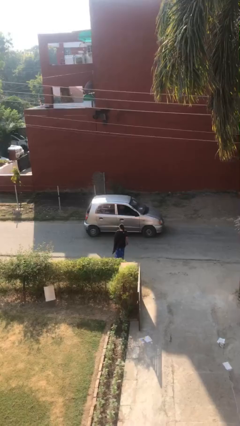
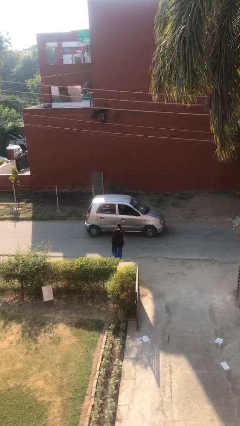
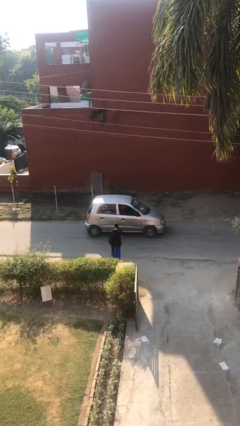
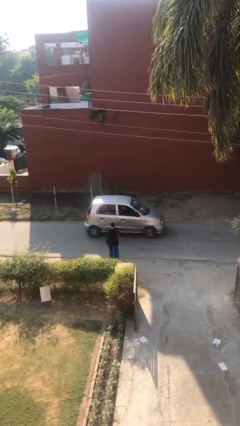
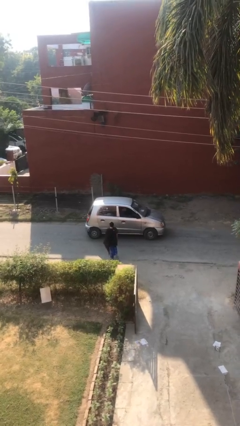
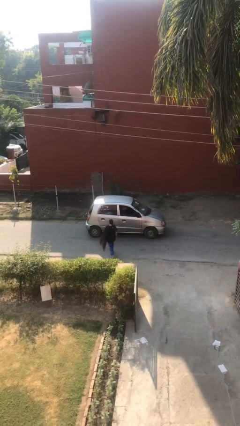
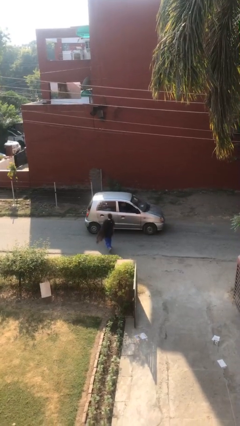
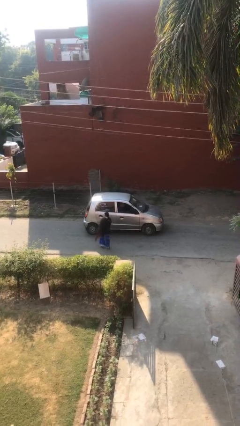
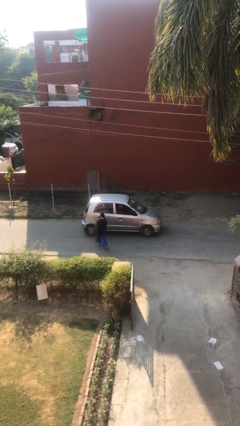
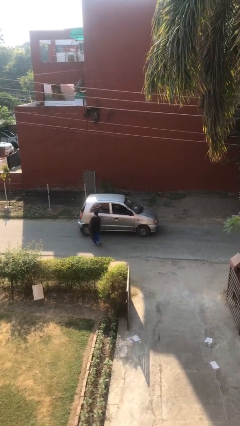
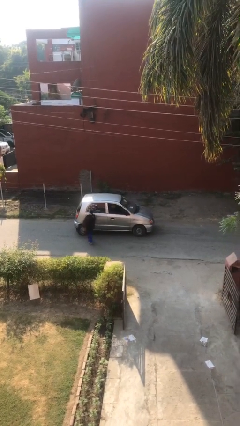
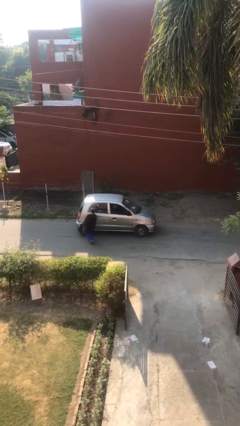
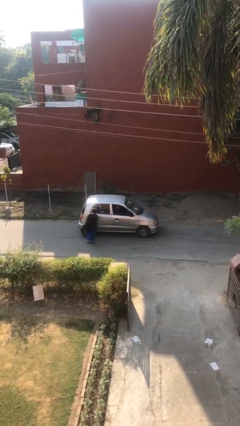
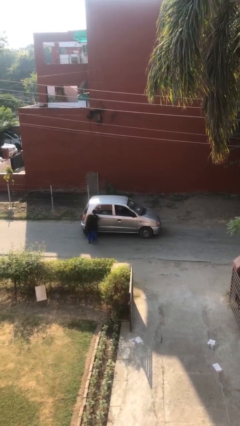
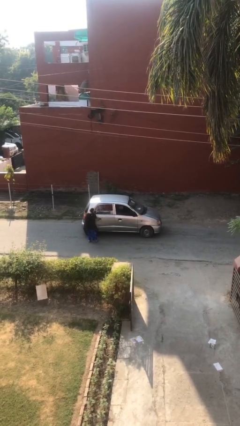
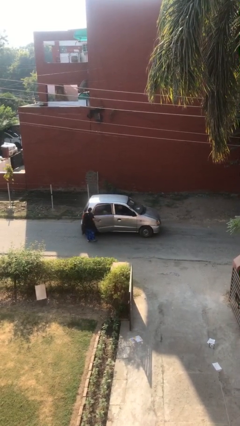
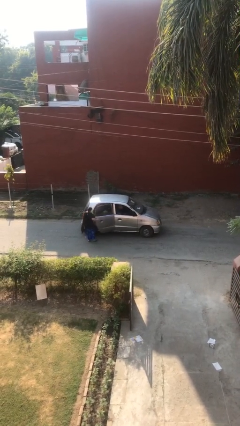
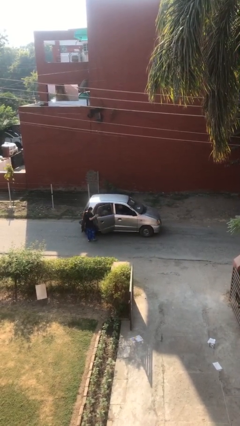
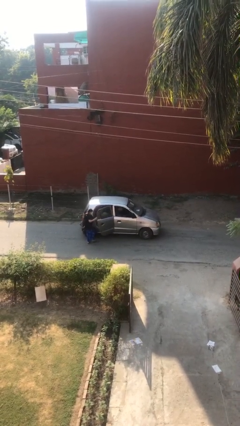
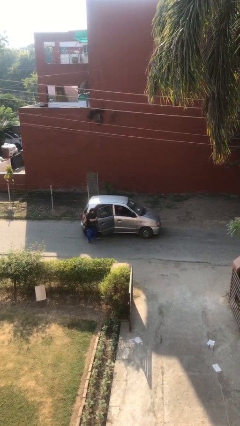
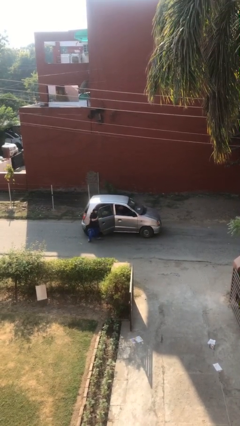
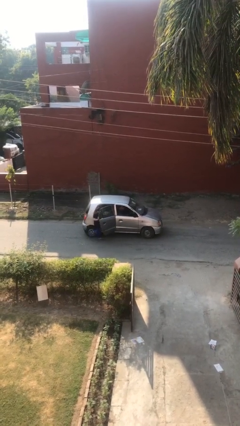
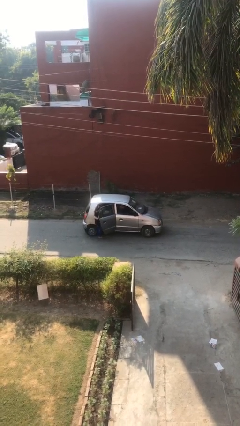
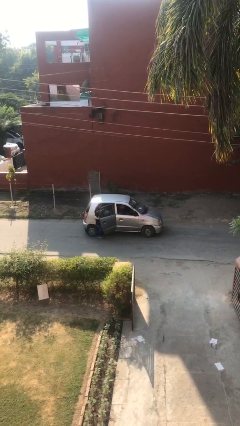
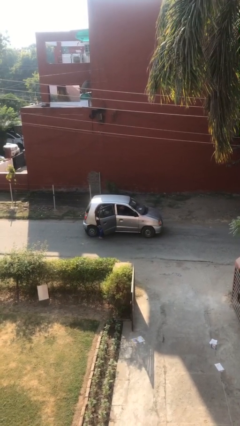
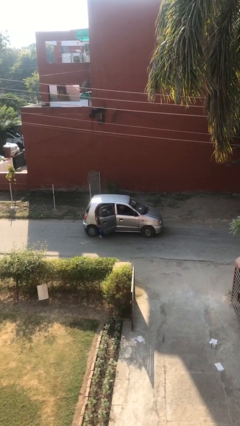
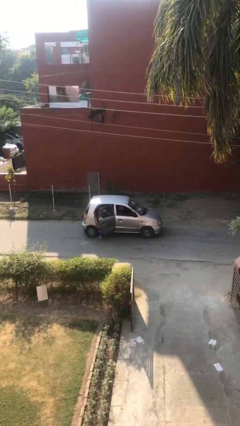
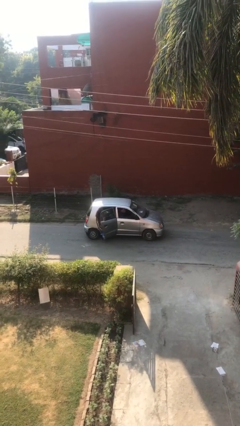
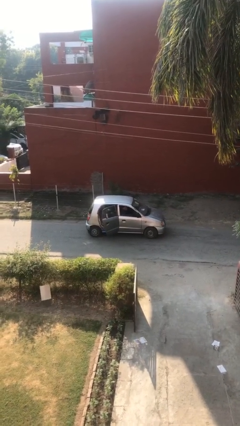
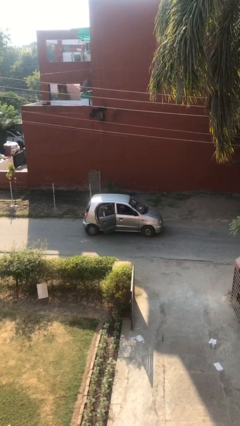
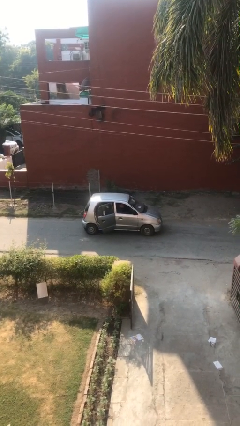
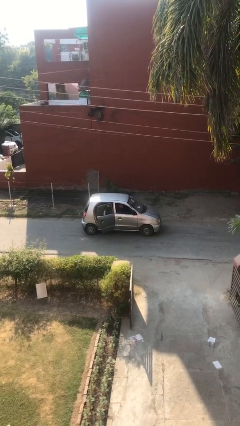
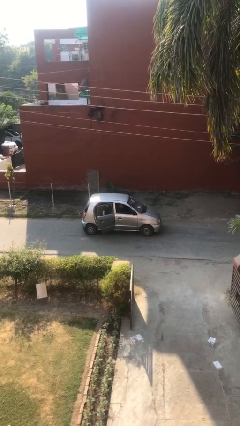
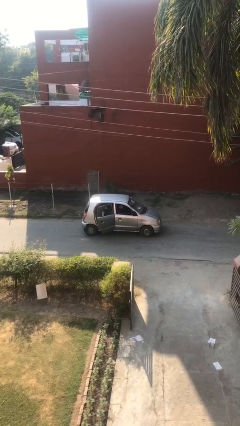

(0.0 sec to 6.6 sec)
car picks up person

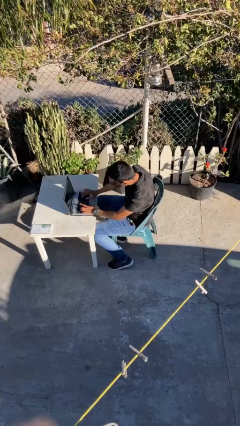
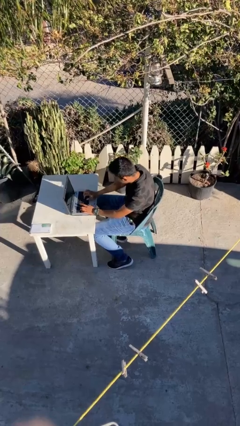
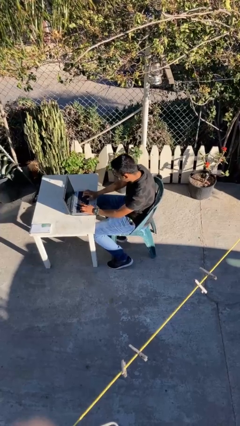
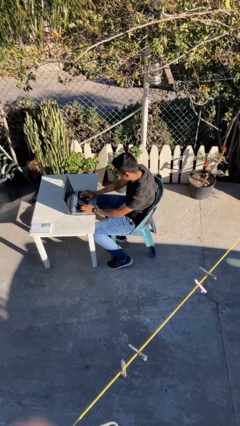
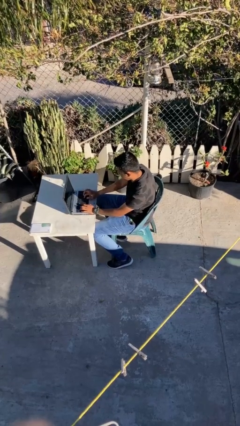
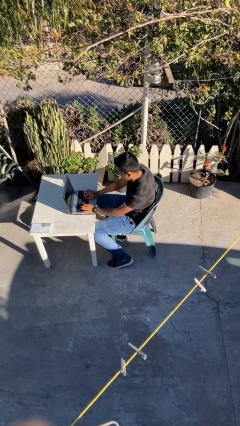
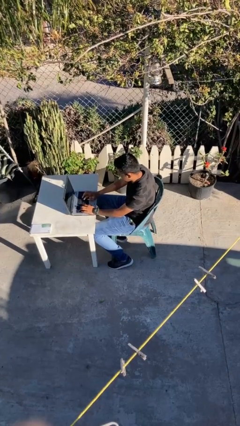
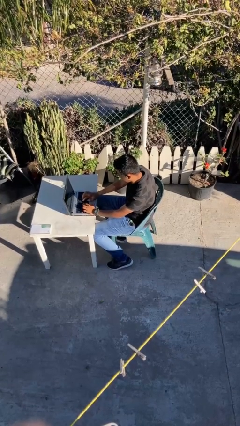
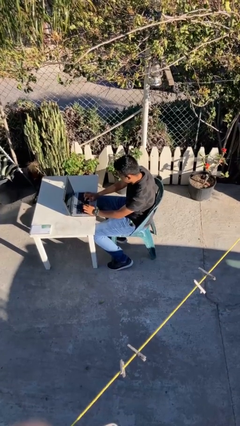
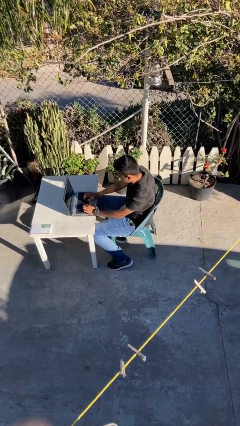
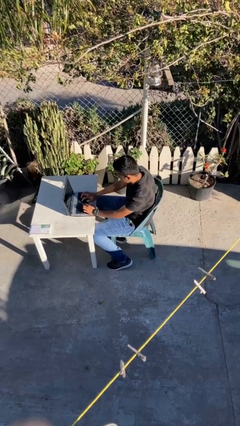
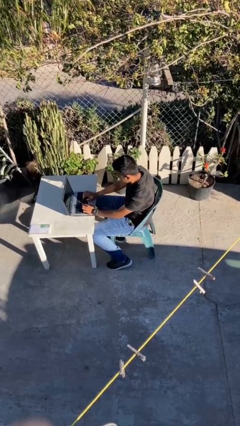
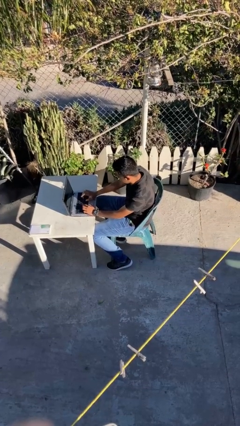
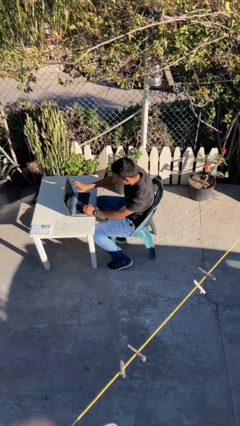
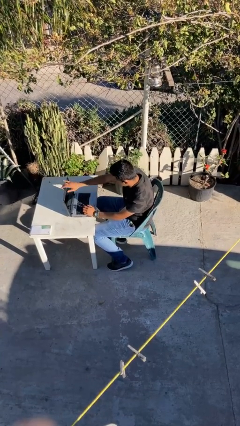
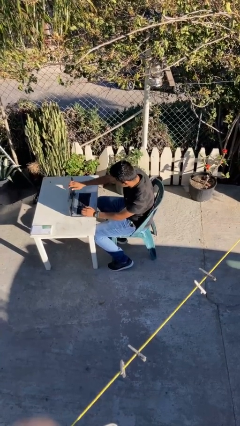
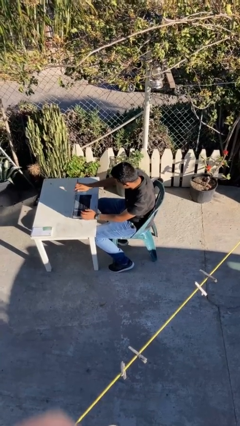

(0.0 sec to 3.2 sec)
person interacts with laptop

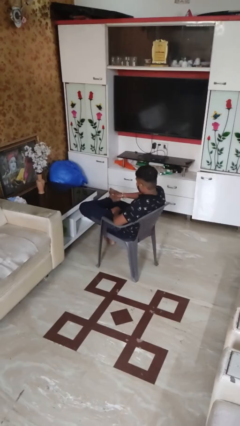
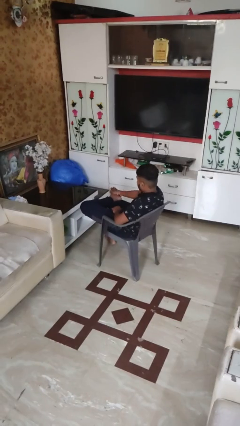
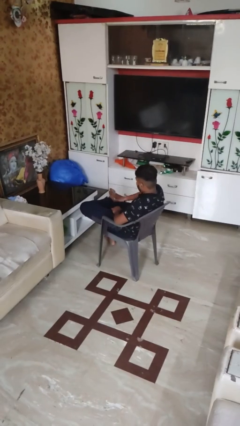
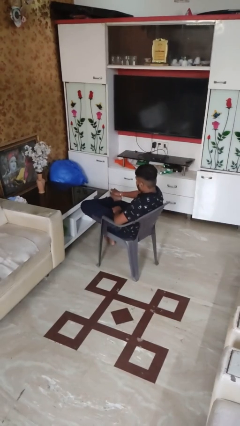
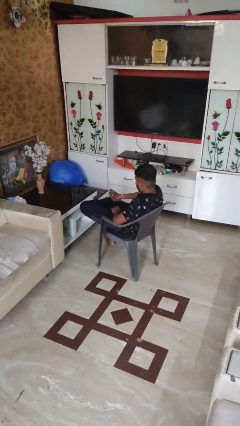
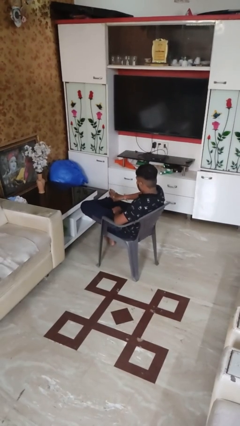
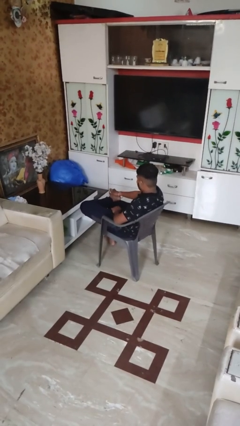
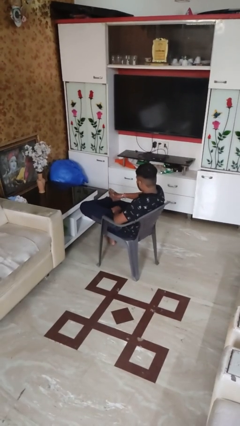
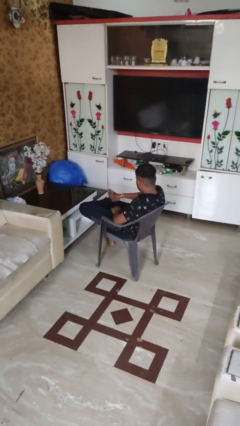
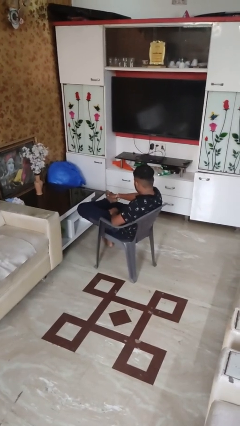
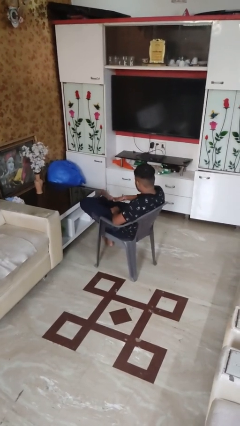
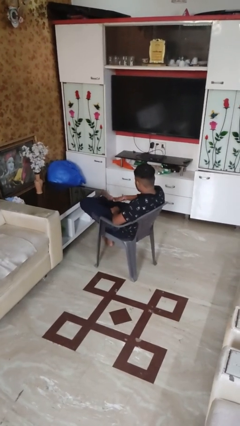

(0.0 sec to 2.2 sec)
person rubs foot

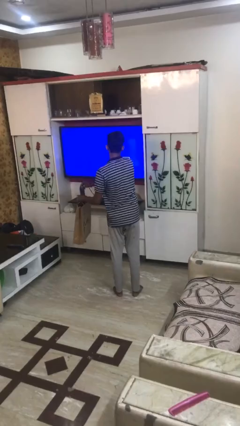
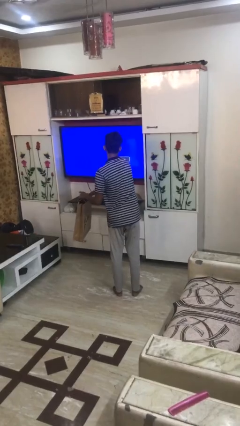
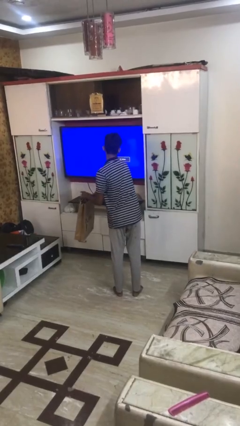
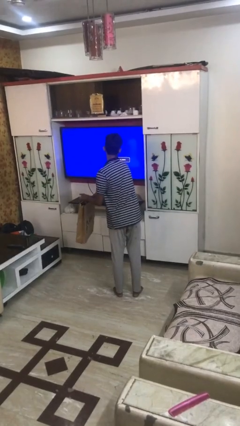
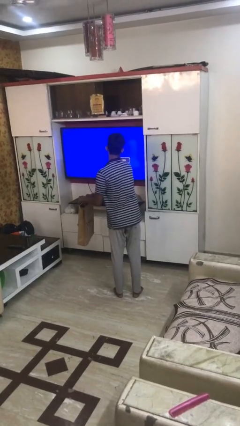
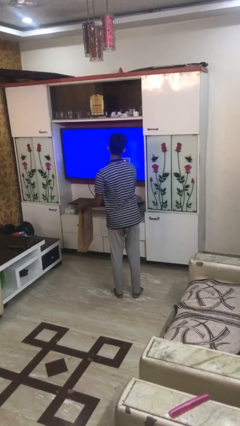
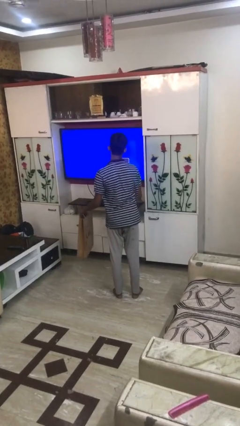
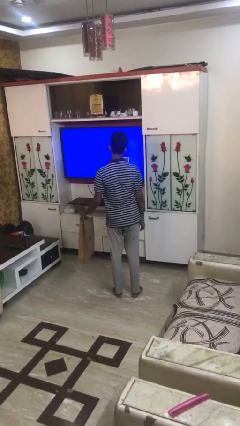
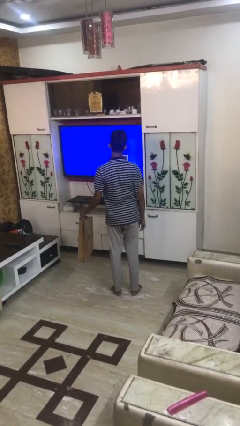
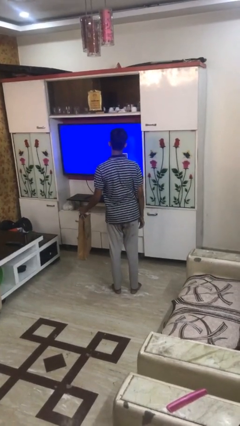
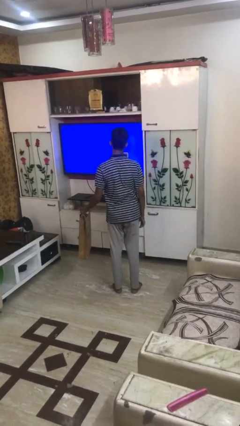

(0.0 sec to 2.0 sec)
person puts object into bag

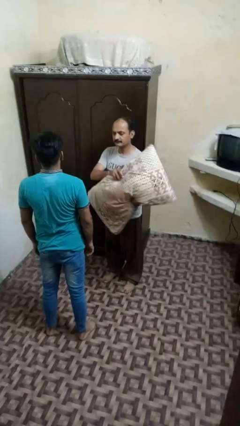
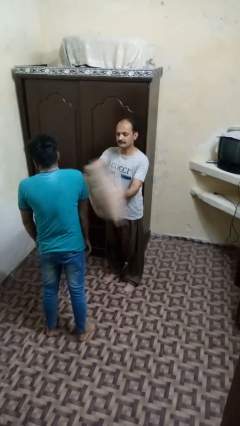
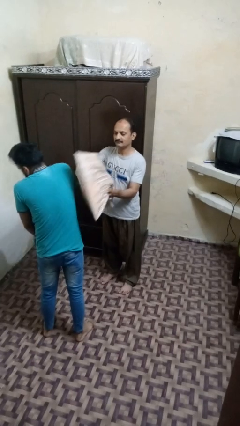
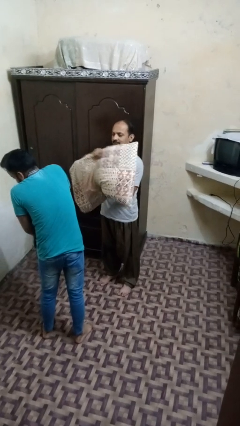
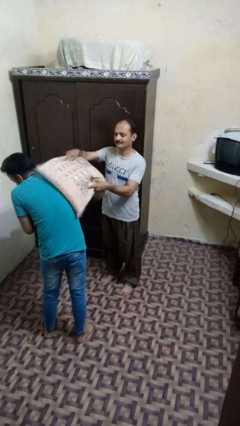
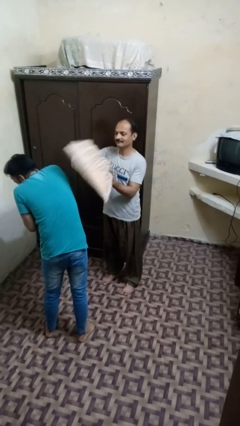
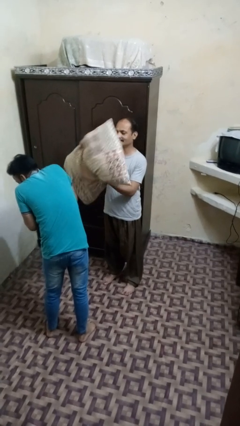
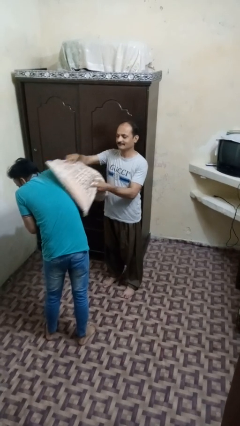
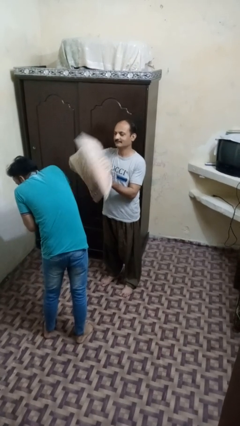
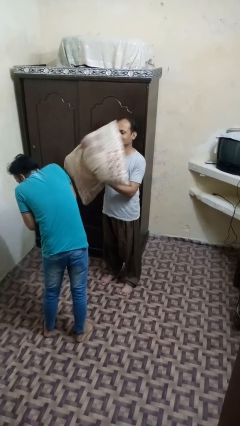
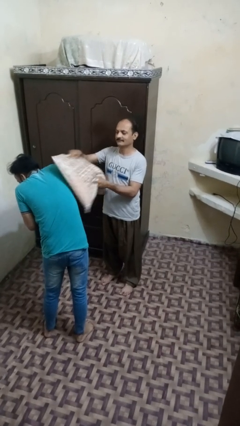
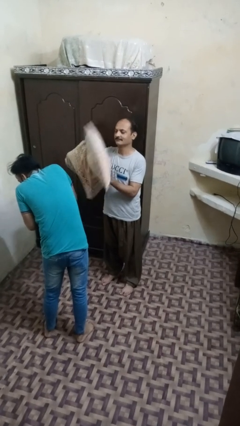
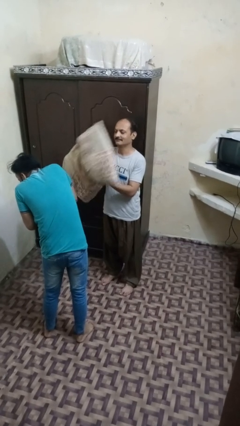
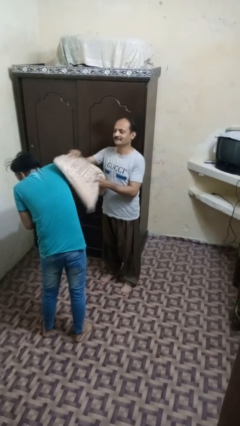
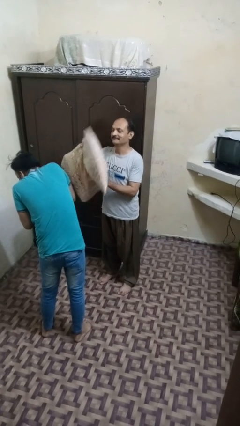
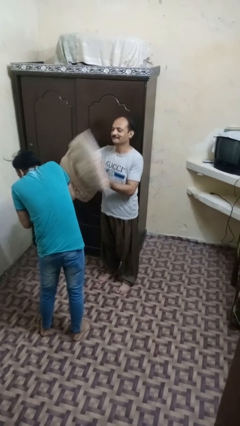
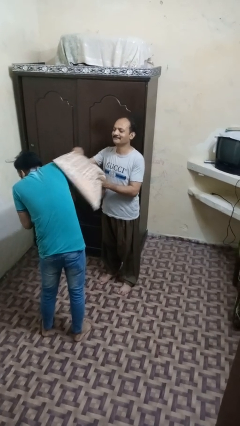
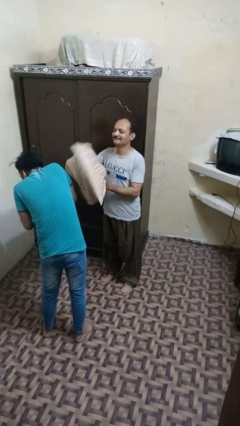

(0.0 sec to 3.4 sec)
person hits person with pillow

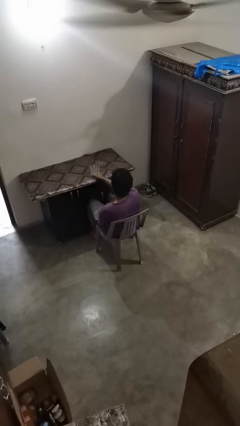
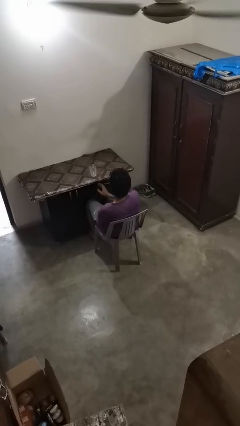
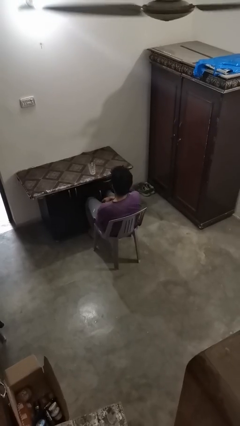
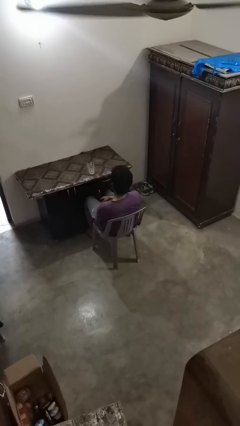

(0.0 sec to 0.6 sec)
person sets upright glass
